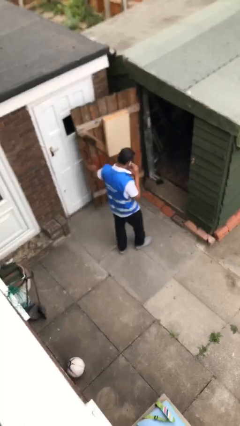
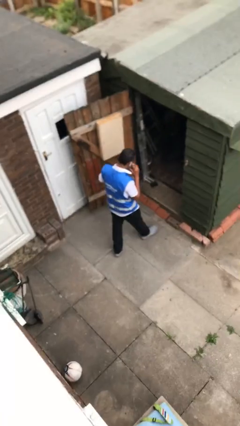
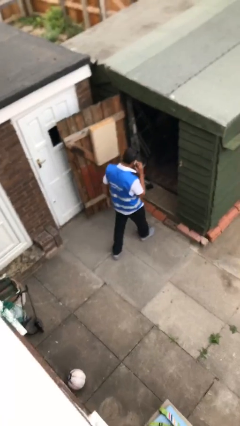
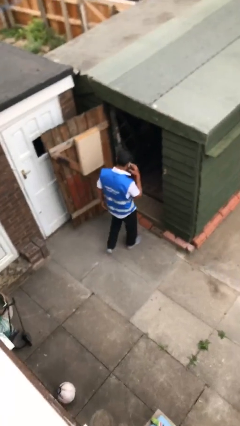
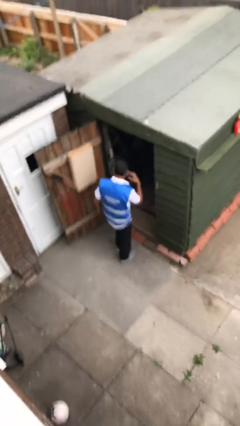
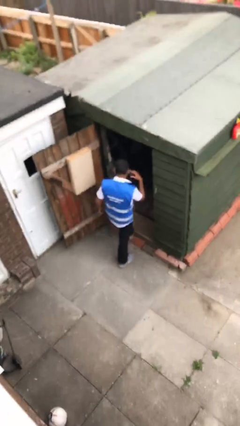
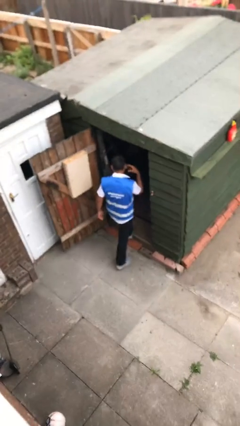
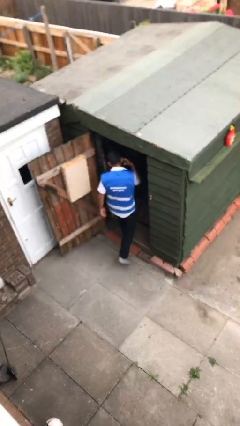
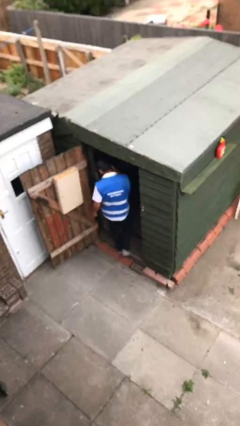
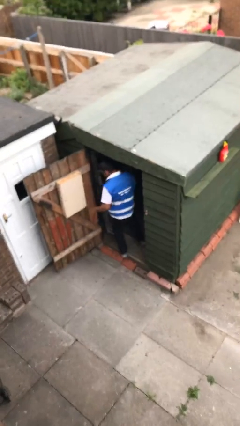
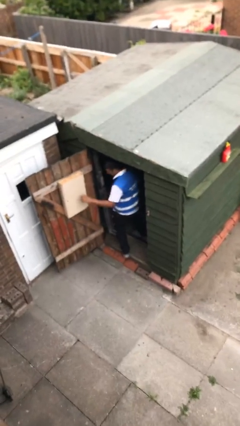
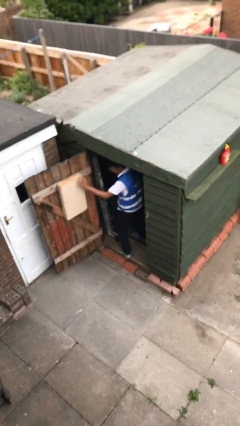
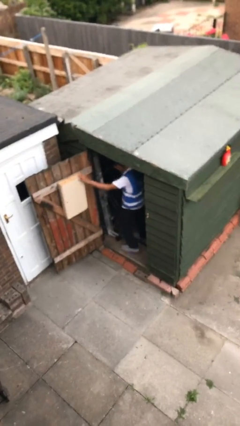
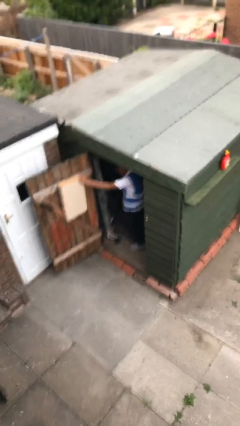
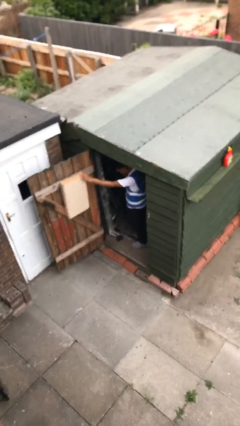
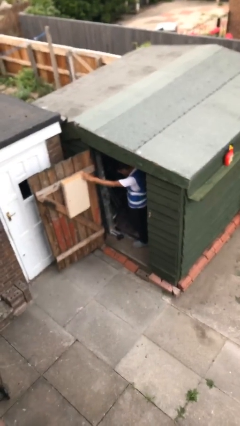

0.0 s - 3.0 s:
person exits scene through structure

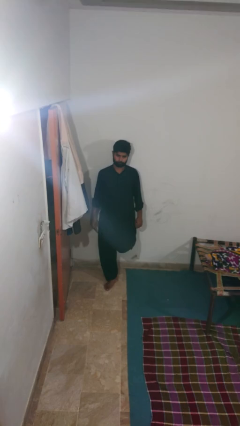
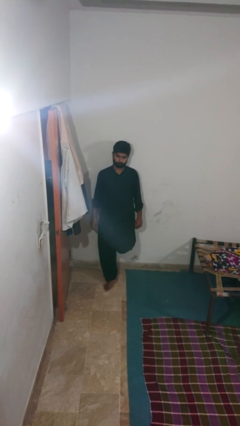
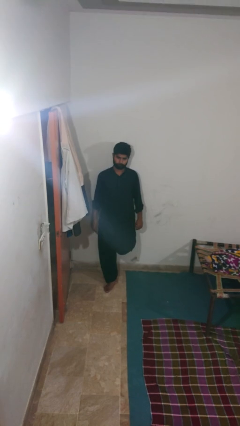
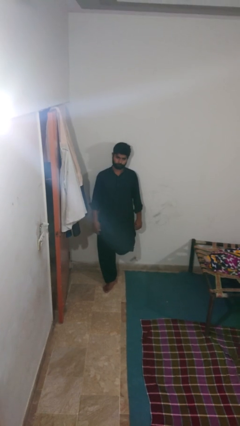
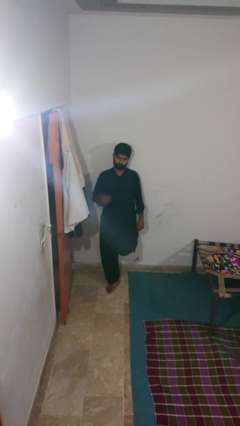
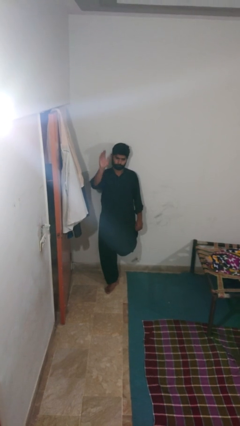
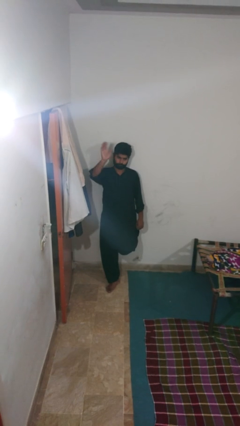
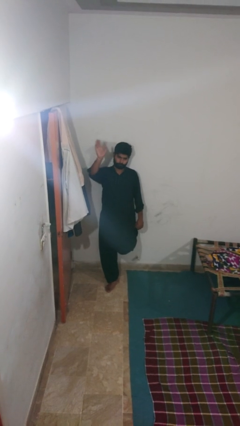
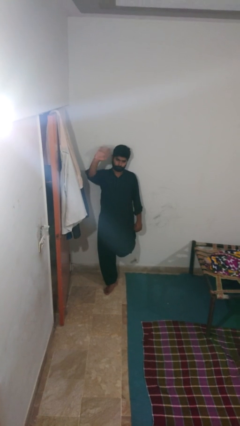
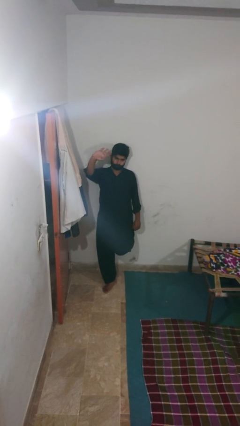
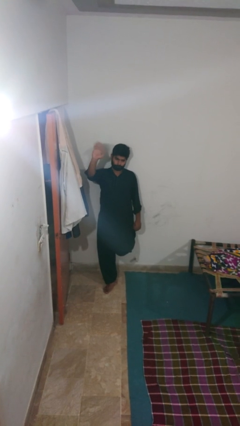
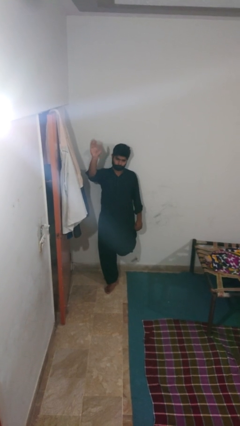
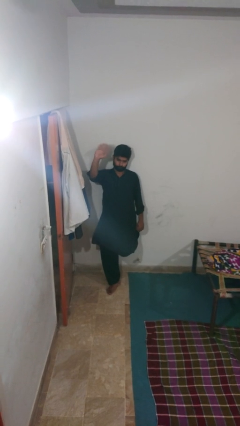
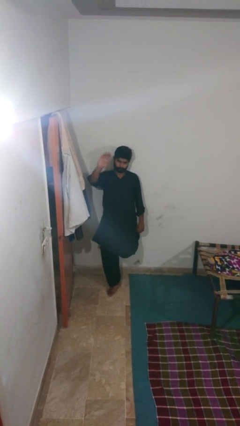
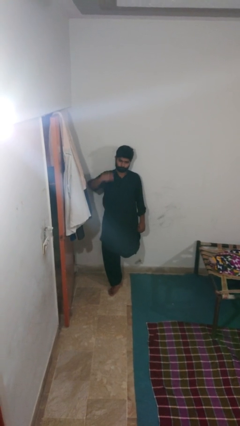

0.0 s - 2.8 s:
person waves at person

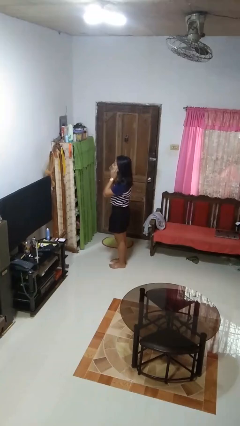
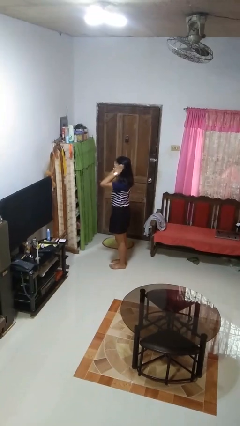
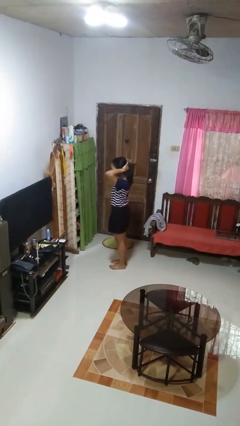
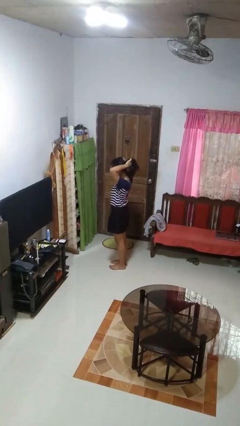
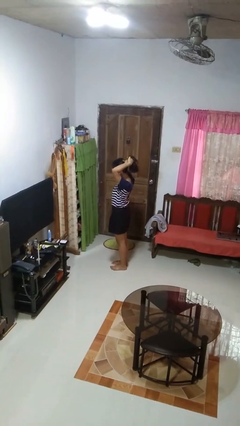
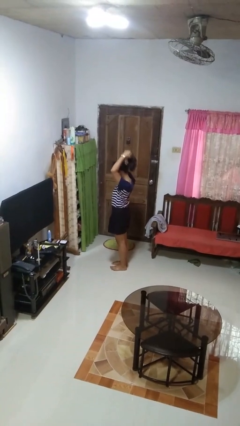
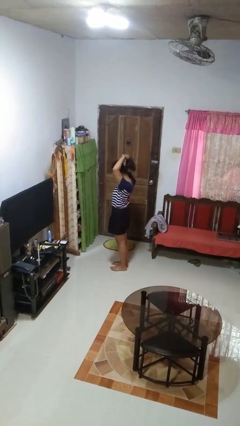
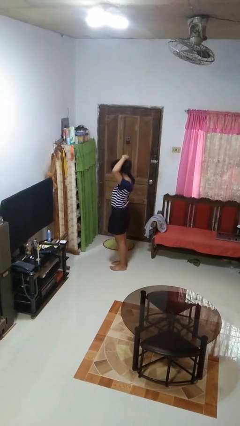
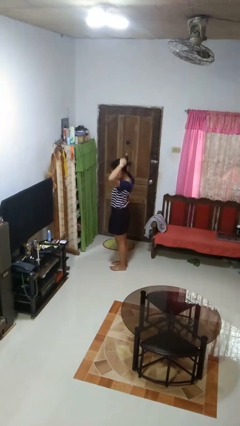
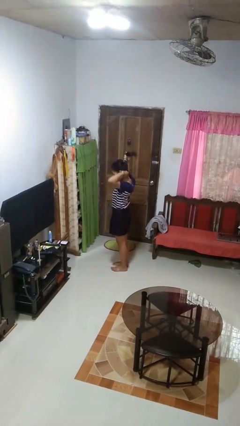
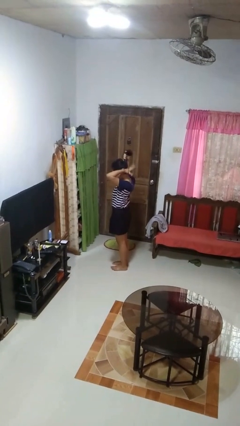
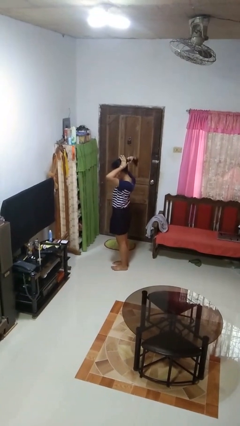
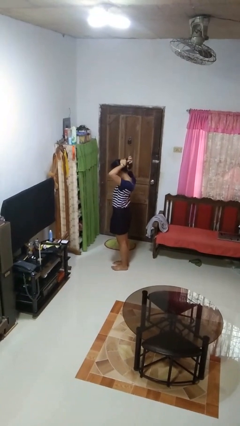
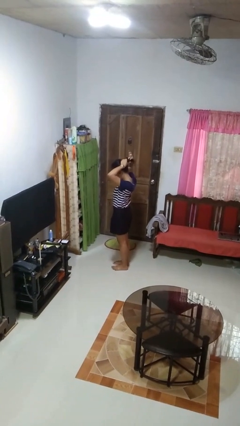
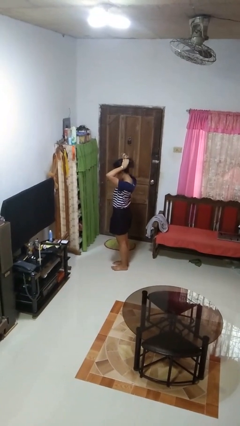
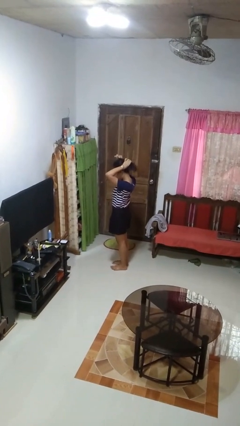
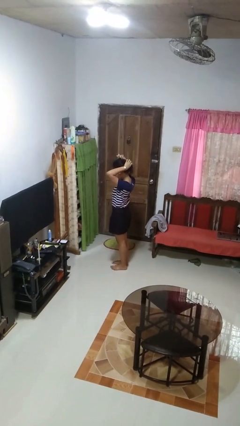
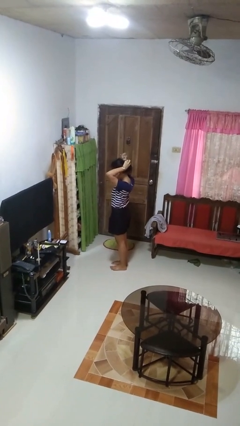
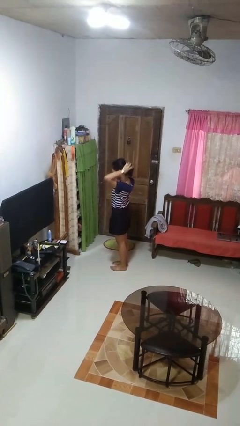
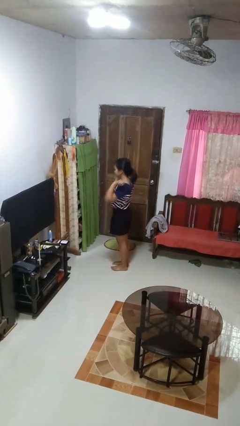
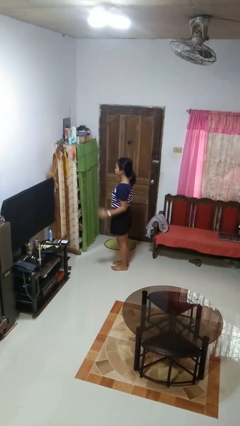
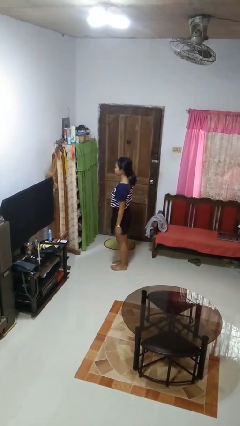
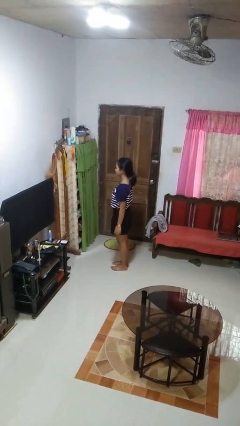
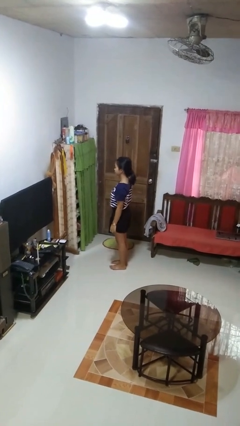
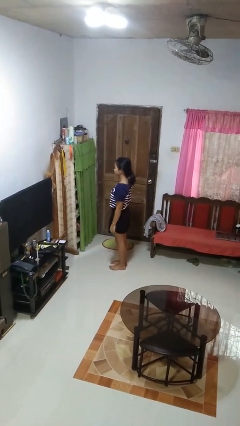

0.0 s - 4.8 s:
person puts hair in ponytail

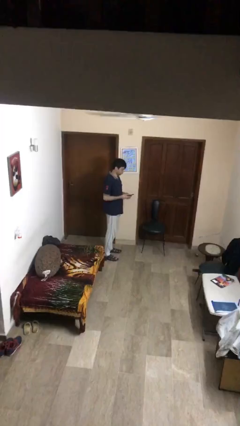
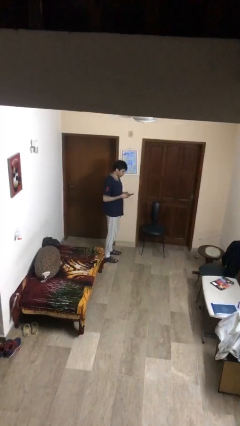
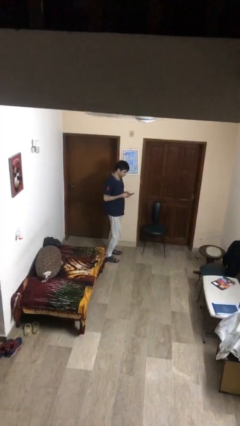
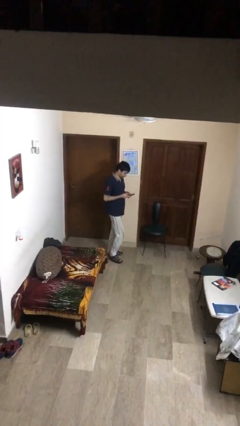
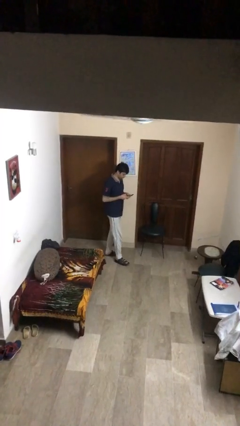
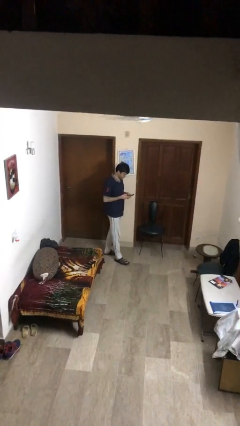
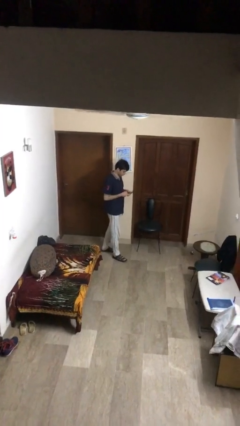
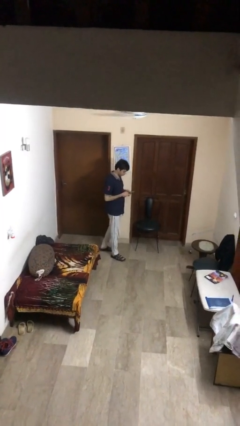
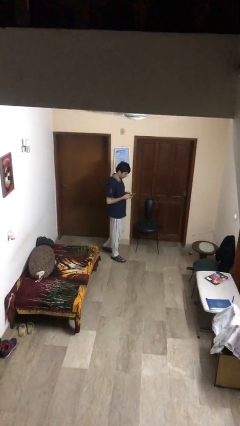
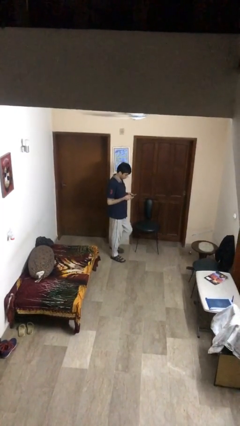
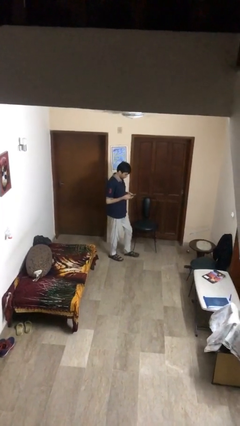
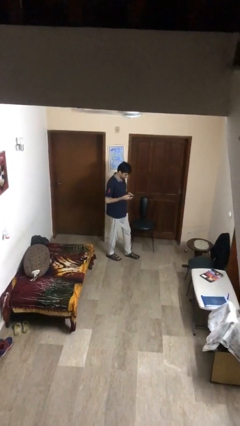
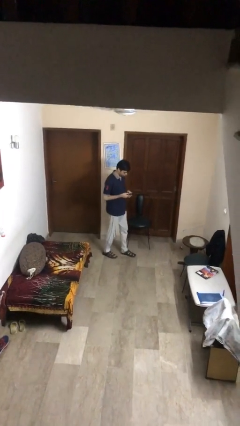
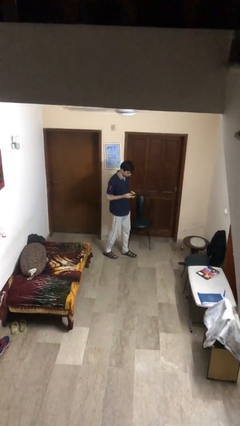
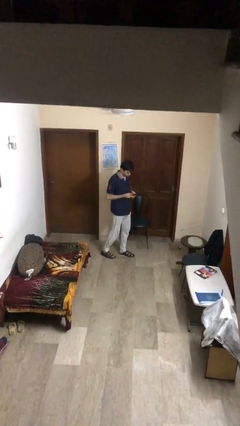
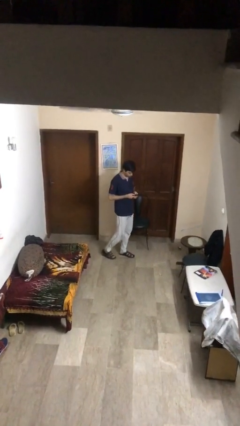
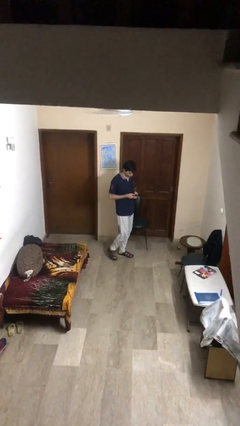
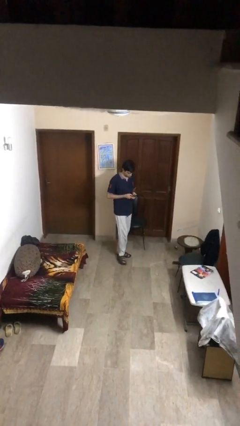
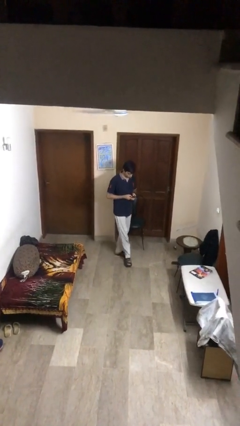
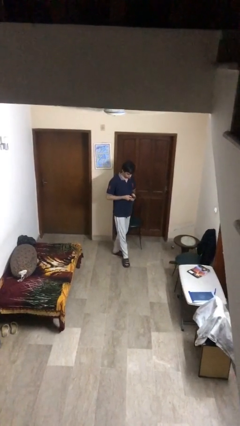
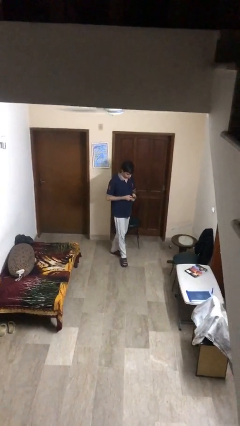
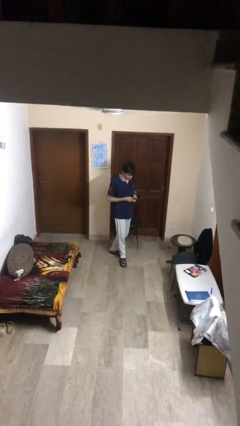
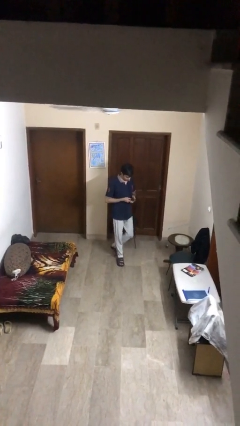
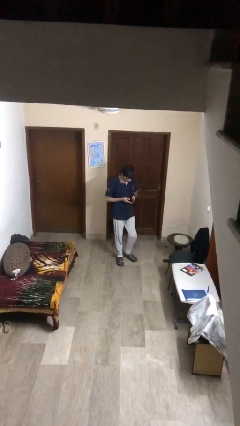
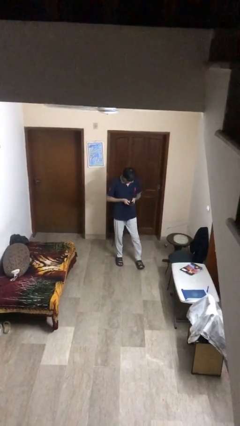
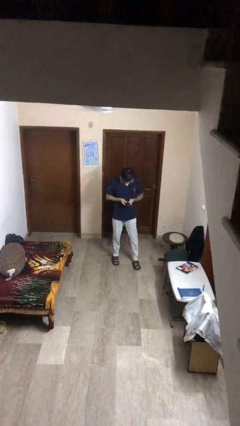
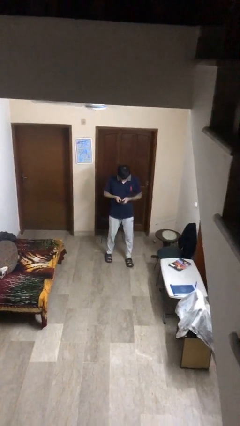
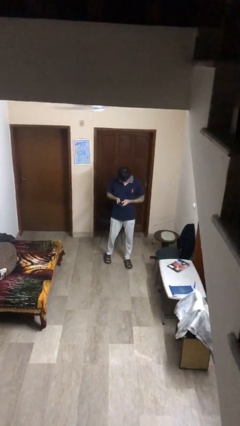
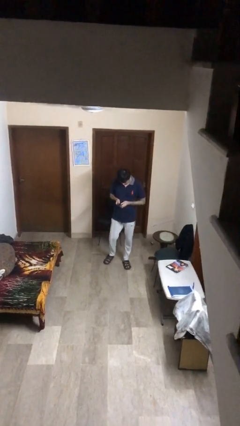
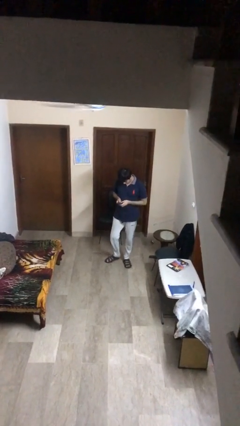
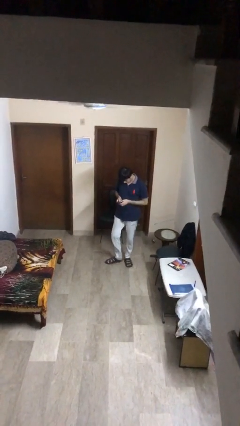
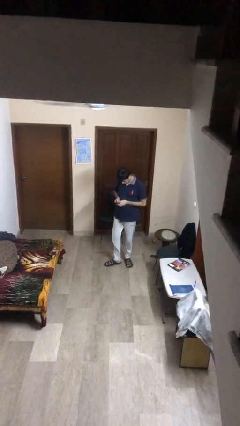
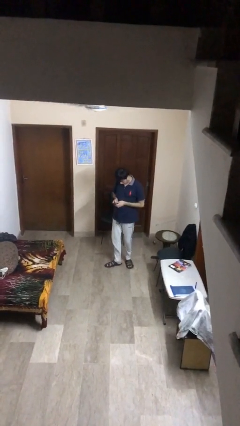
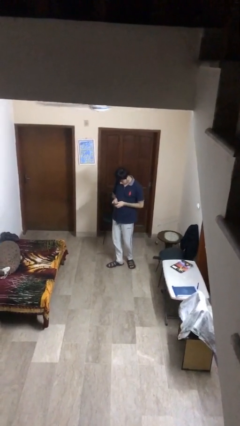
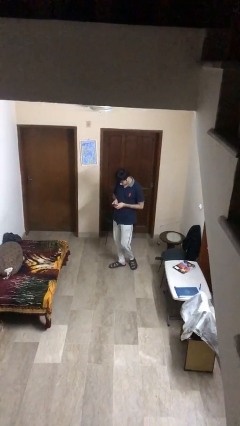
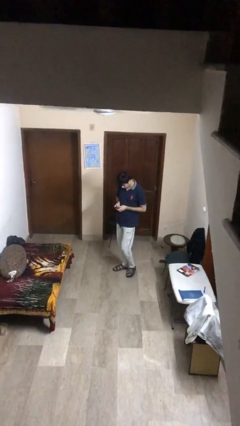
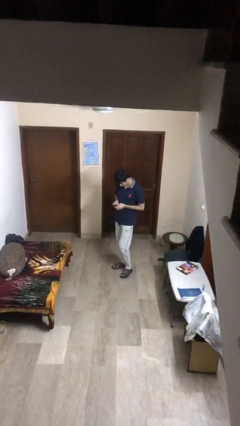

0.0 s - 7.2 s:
person texts on phone
